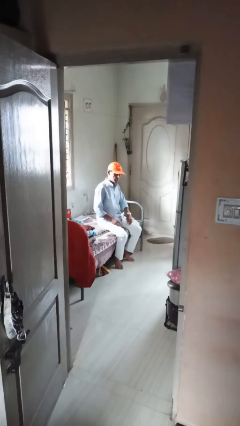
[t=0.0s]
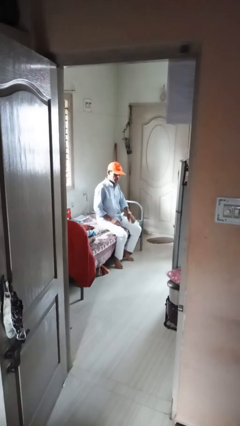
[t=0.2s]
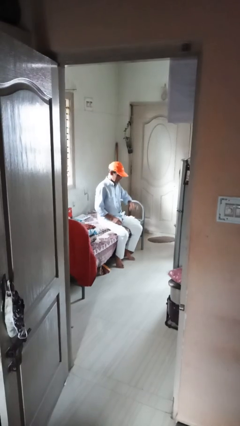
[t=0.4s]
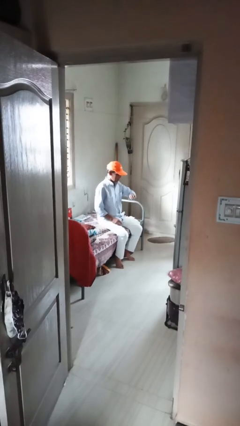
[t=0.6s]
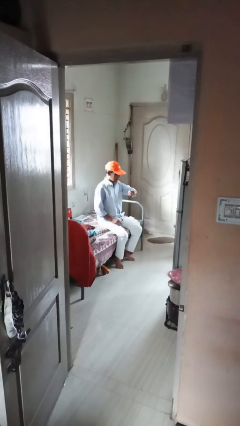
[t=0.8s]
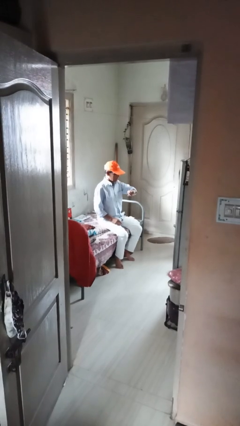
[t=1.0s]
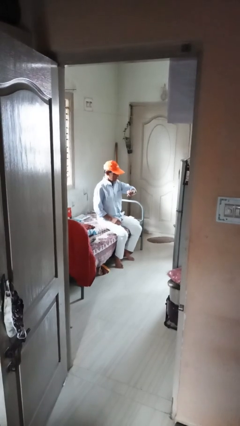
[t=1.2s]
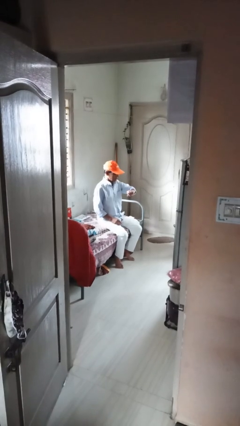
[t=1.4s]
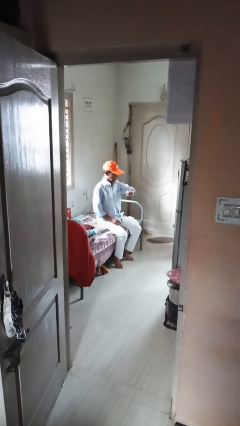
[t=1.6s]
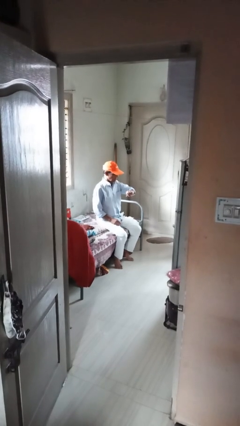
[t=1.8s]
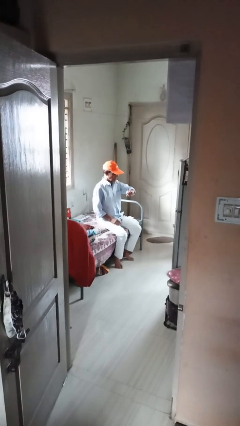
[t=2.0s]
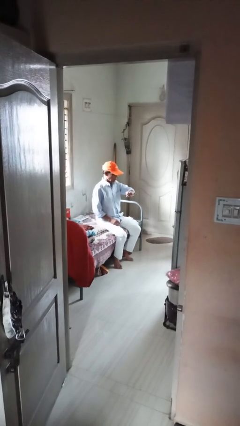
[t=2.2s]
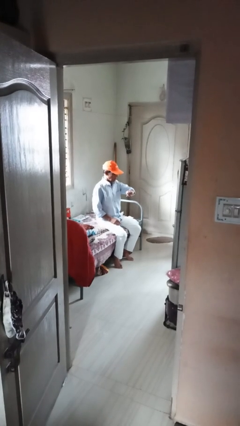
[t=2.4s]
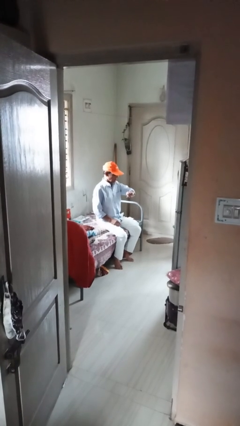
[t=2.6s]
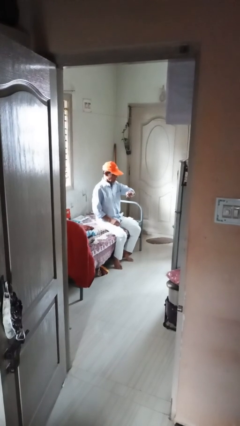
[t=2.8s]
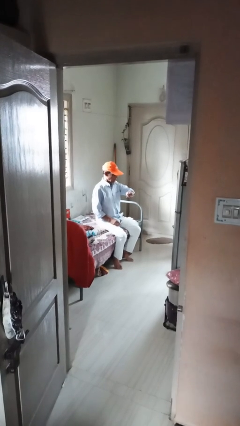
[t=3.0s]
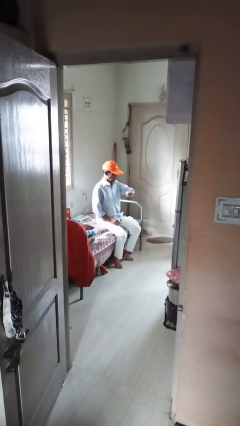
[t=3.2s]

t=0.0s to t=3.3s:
person looks at wristwatch

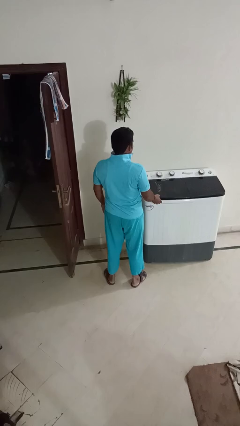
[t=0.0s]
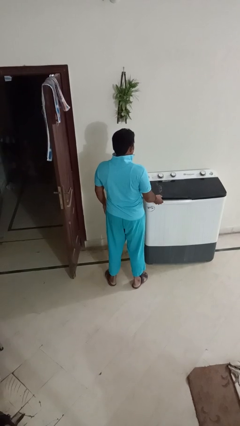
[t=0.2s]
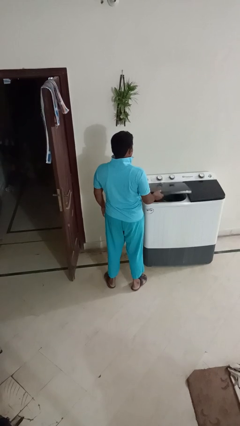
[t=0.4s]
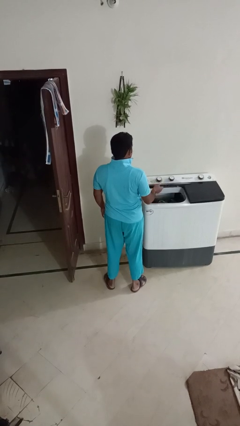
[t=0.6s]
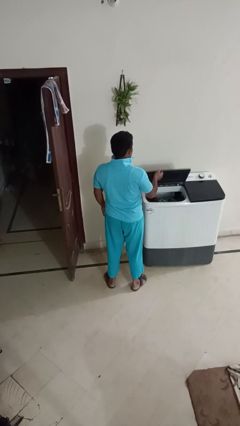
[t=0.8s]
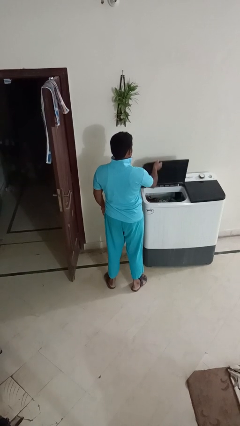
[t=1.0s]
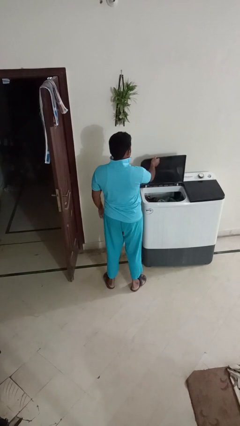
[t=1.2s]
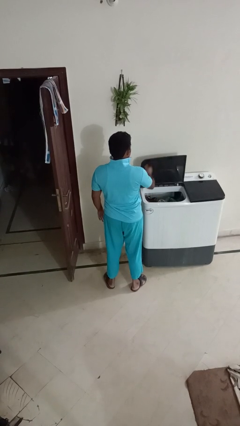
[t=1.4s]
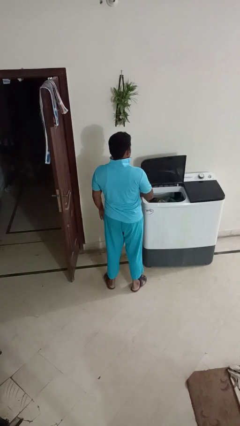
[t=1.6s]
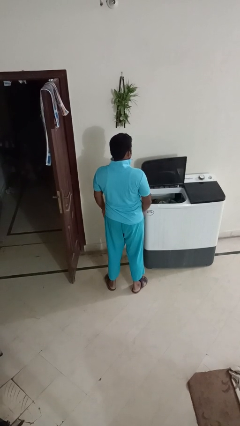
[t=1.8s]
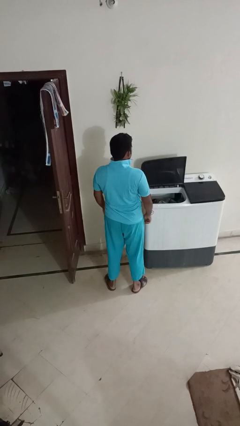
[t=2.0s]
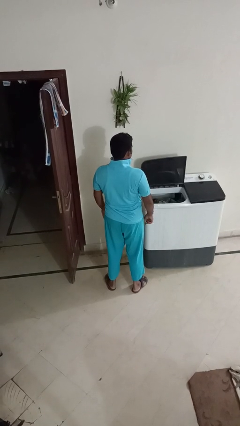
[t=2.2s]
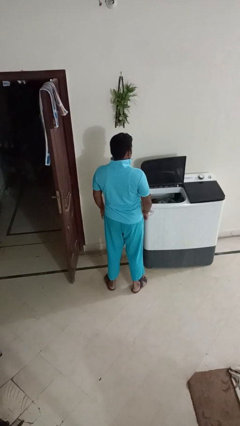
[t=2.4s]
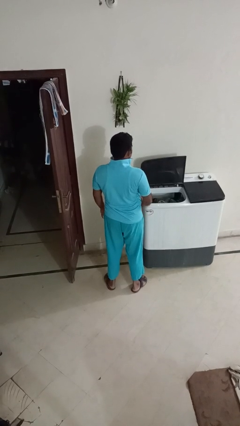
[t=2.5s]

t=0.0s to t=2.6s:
person opens clothes washer

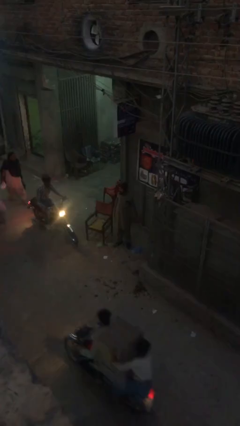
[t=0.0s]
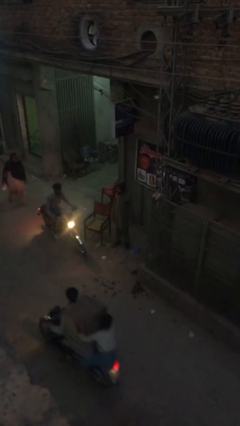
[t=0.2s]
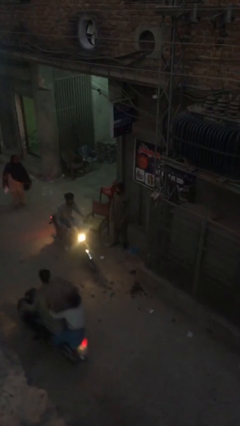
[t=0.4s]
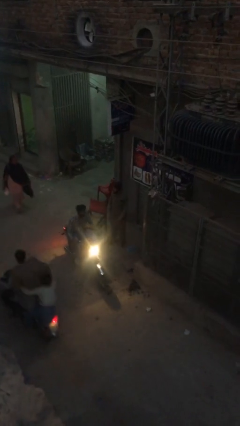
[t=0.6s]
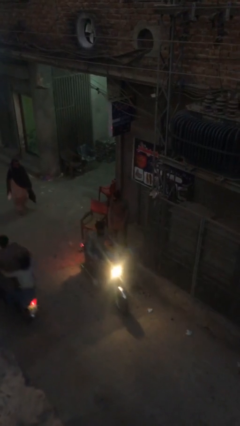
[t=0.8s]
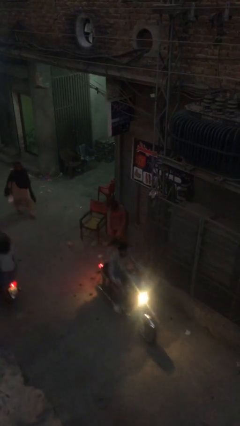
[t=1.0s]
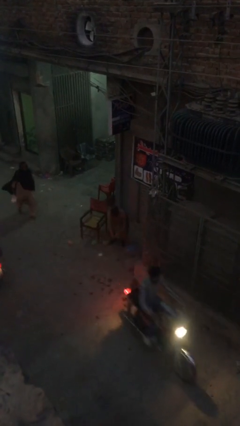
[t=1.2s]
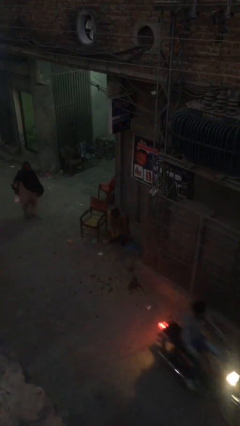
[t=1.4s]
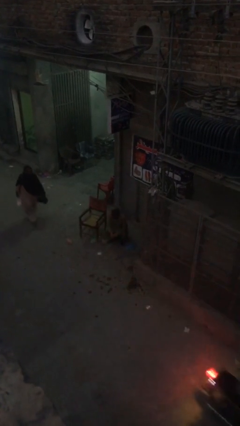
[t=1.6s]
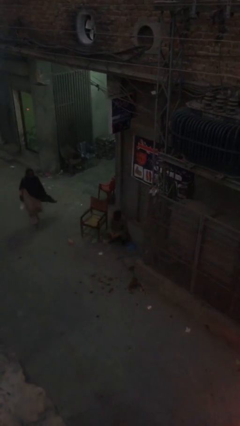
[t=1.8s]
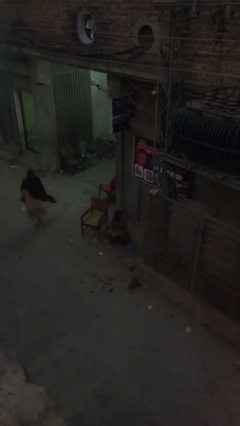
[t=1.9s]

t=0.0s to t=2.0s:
person sits down

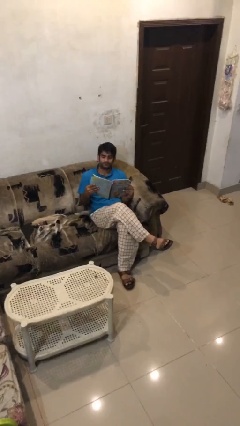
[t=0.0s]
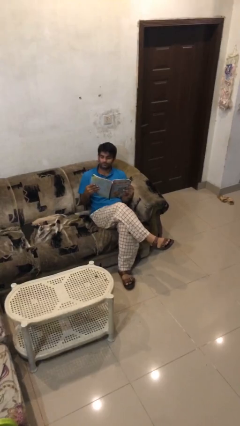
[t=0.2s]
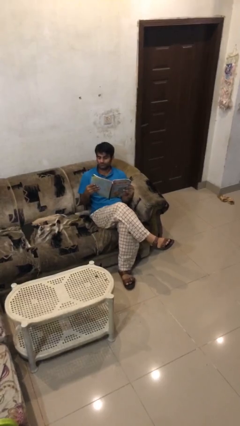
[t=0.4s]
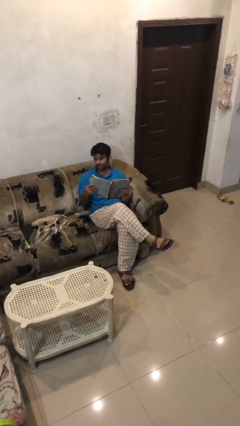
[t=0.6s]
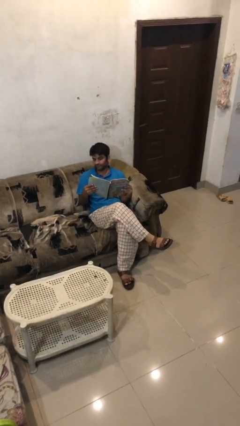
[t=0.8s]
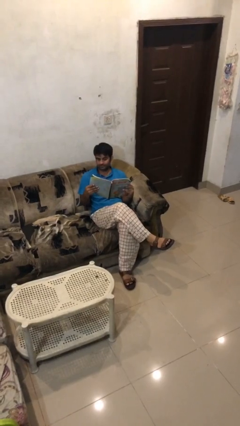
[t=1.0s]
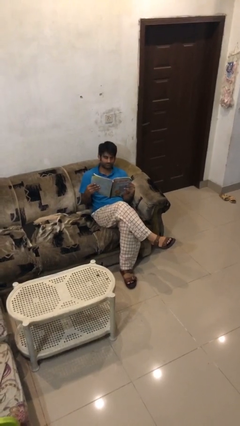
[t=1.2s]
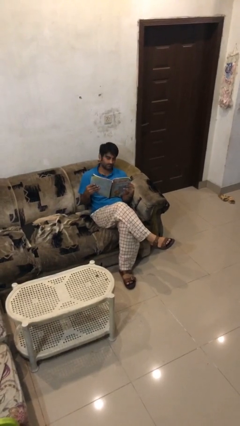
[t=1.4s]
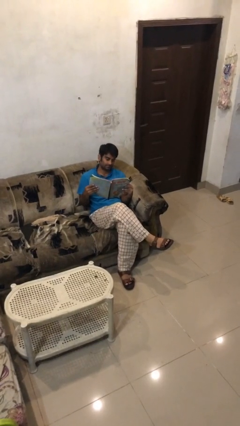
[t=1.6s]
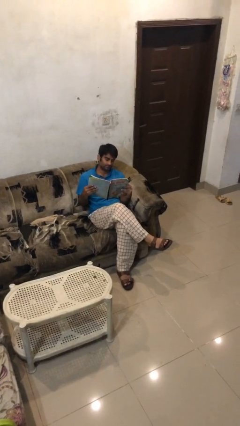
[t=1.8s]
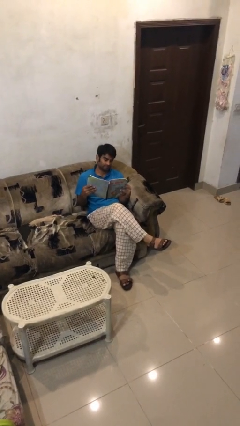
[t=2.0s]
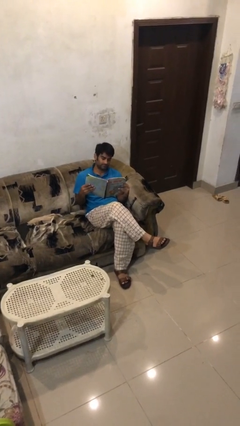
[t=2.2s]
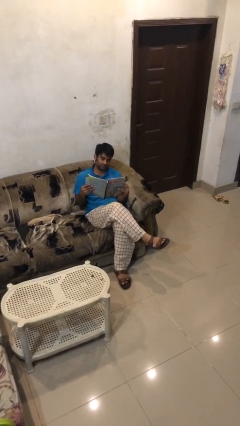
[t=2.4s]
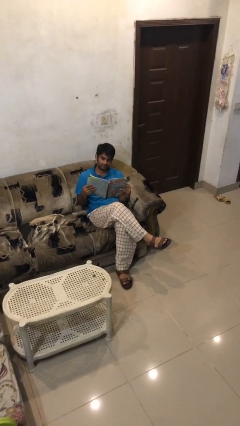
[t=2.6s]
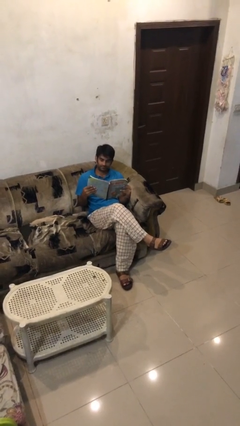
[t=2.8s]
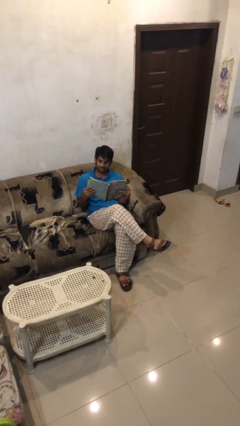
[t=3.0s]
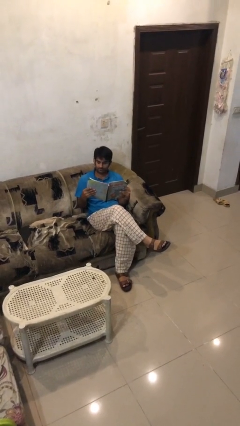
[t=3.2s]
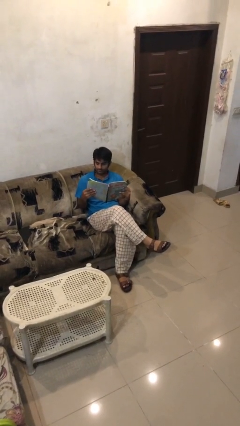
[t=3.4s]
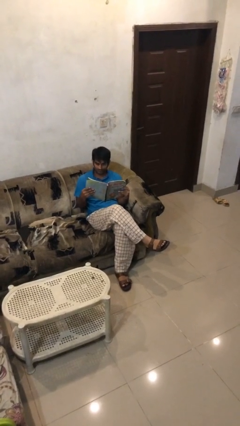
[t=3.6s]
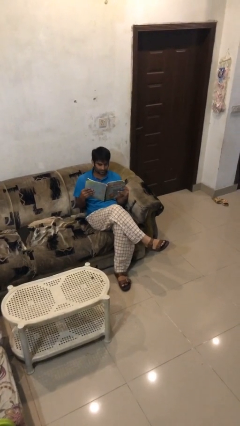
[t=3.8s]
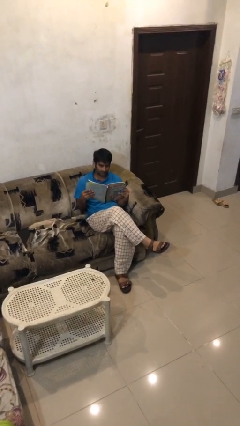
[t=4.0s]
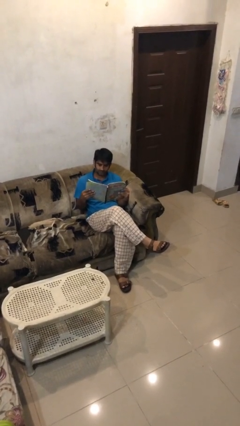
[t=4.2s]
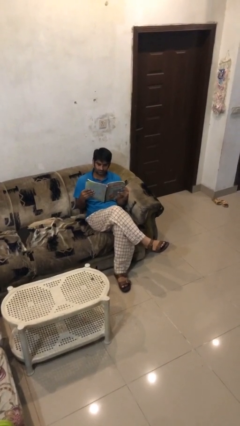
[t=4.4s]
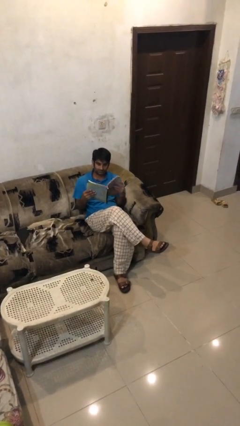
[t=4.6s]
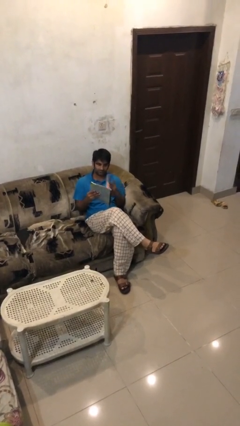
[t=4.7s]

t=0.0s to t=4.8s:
person reads document

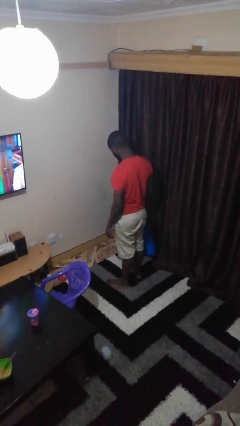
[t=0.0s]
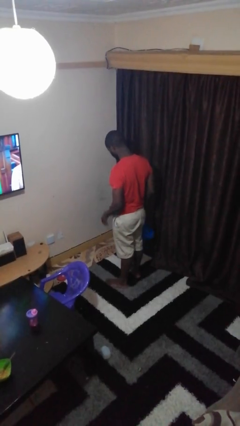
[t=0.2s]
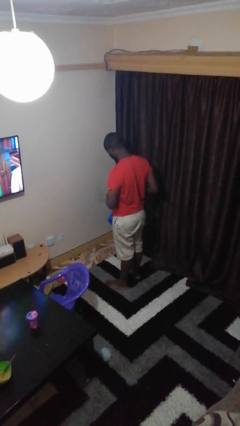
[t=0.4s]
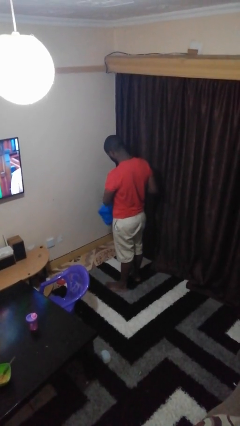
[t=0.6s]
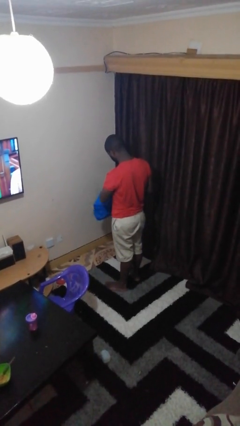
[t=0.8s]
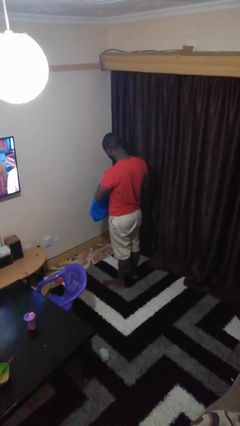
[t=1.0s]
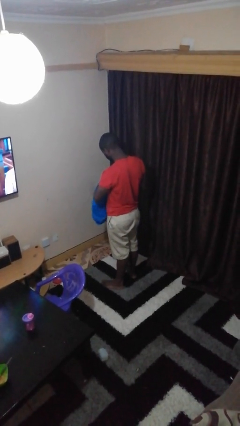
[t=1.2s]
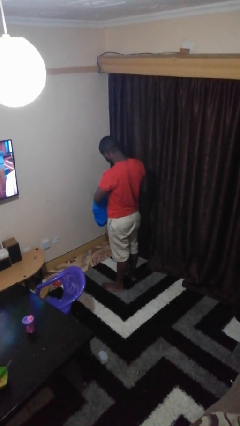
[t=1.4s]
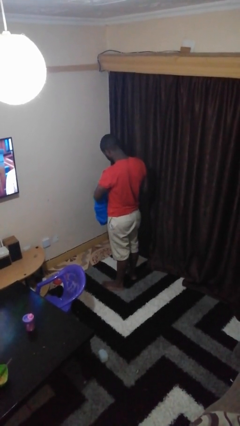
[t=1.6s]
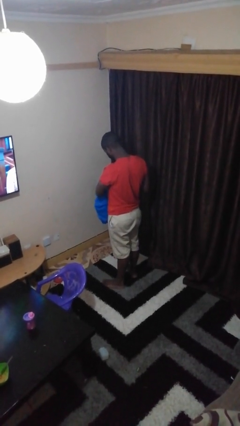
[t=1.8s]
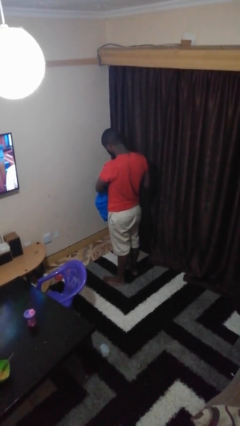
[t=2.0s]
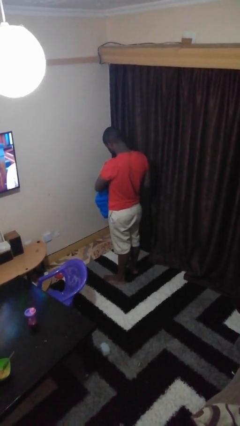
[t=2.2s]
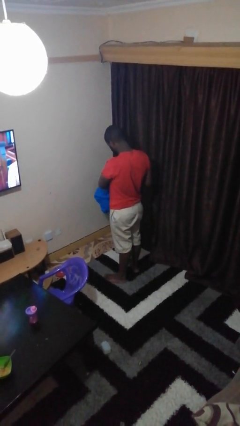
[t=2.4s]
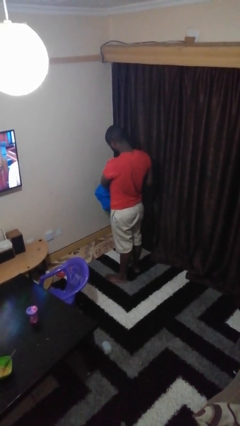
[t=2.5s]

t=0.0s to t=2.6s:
person takes object from bag

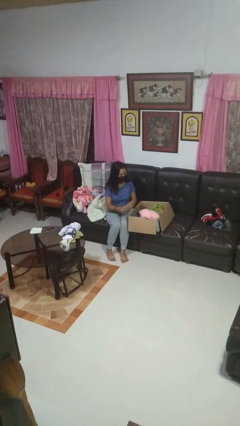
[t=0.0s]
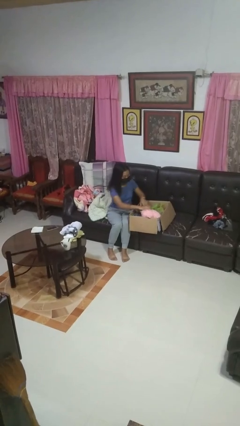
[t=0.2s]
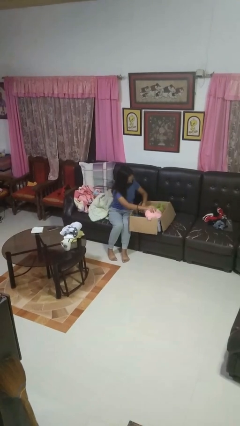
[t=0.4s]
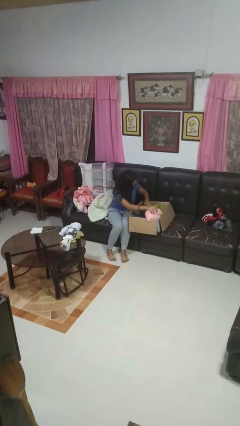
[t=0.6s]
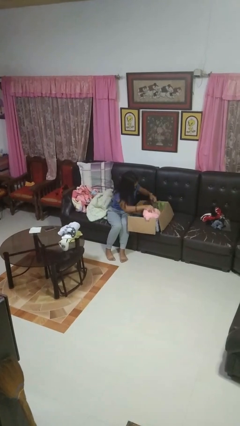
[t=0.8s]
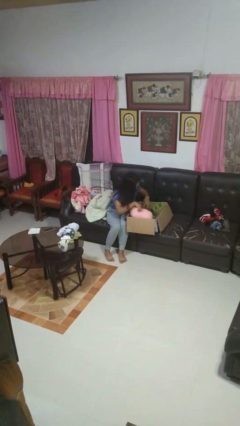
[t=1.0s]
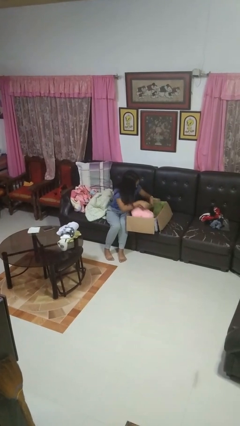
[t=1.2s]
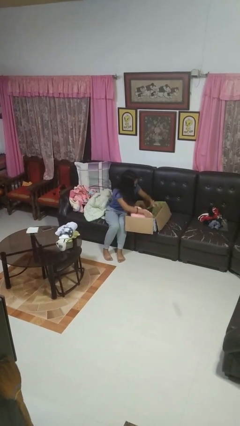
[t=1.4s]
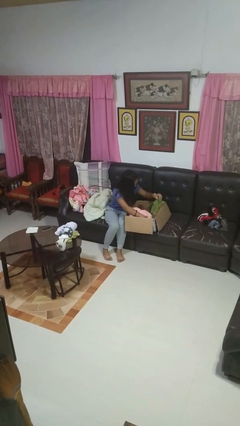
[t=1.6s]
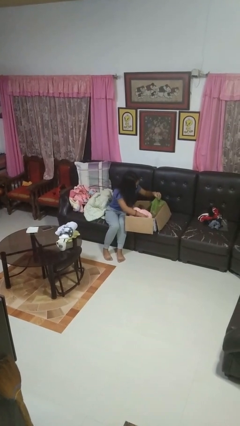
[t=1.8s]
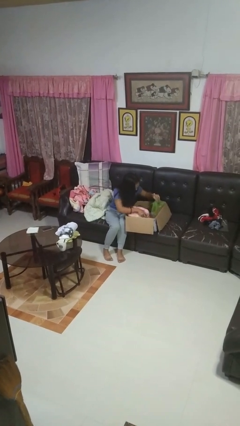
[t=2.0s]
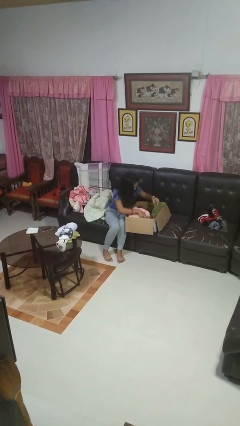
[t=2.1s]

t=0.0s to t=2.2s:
person searches in box
